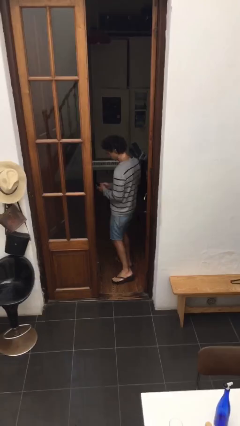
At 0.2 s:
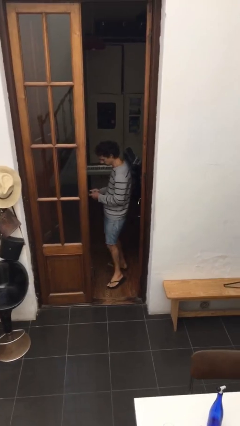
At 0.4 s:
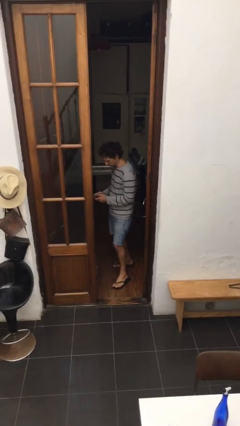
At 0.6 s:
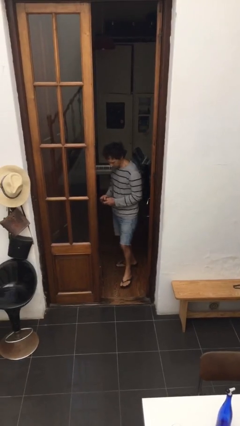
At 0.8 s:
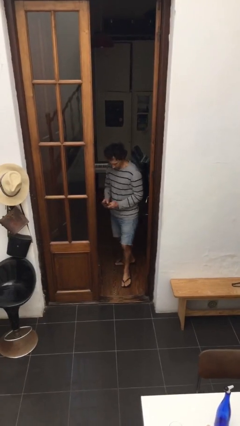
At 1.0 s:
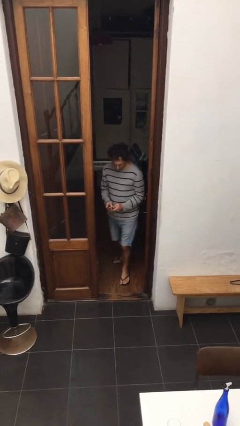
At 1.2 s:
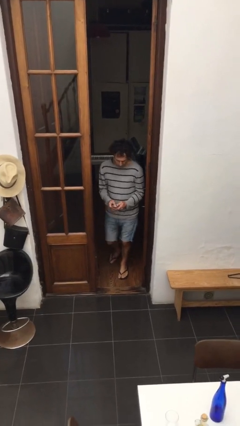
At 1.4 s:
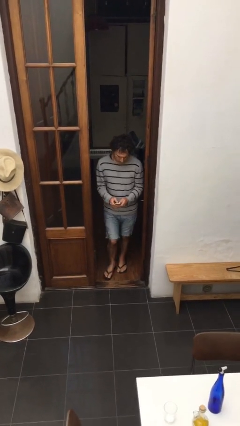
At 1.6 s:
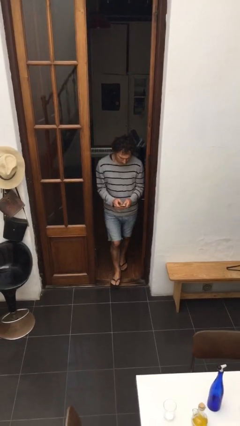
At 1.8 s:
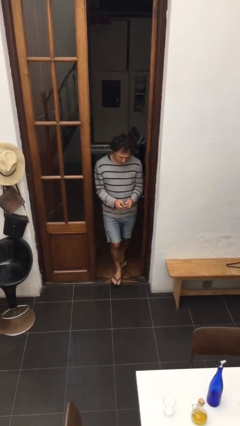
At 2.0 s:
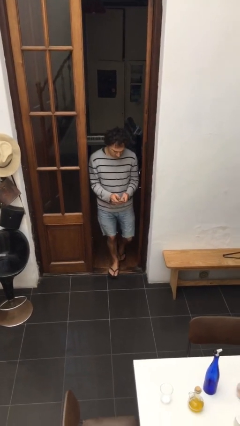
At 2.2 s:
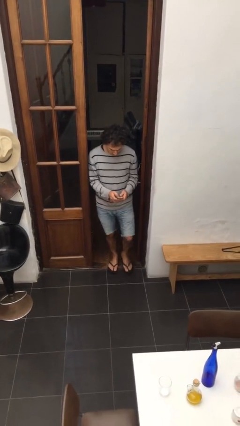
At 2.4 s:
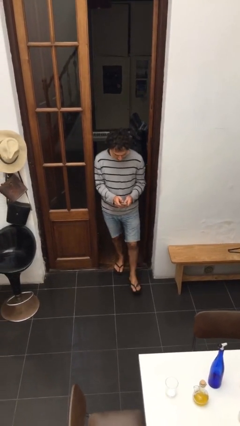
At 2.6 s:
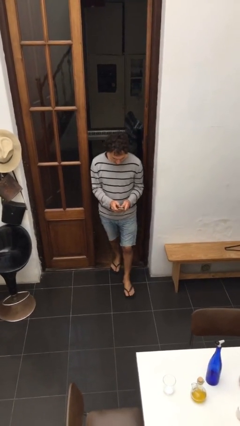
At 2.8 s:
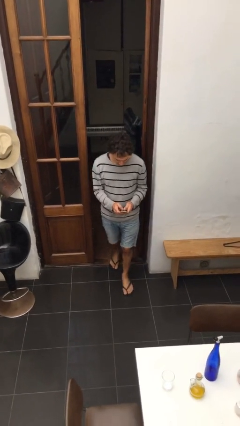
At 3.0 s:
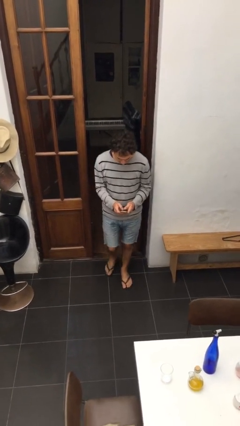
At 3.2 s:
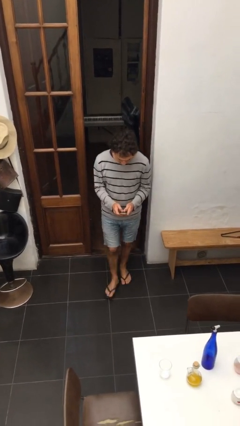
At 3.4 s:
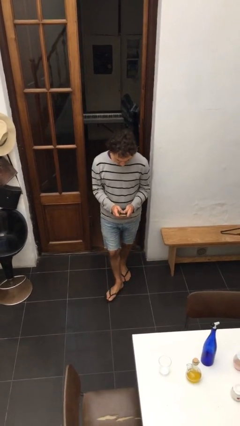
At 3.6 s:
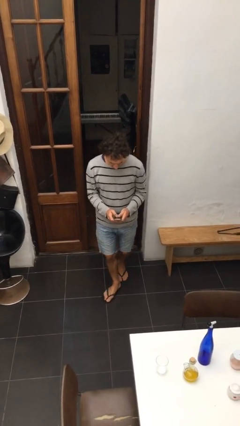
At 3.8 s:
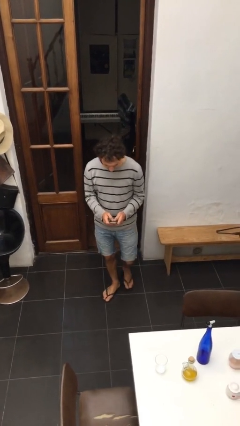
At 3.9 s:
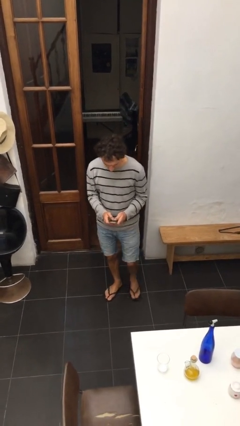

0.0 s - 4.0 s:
person enters scene through structure

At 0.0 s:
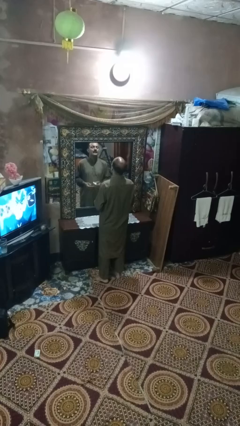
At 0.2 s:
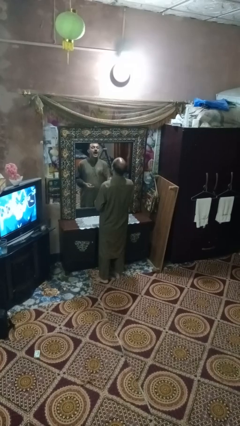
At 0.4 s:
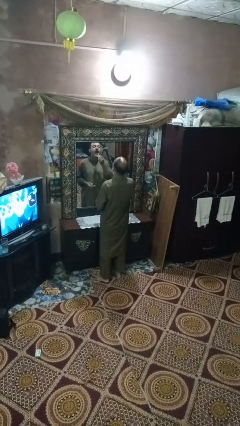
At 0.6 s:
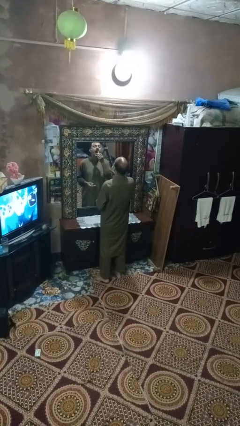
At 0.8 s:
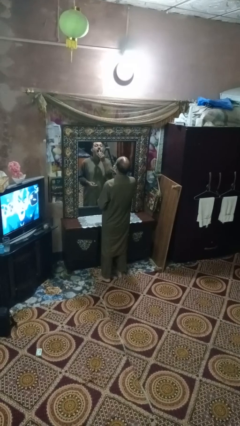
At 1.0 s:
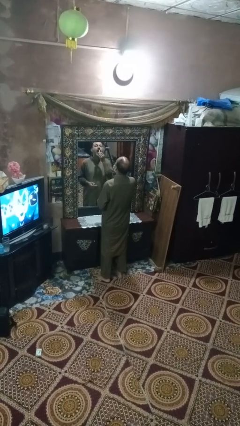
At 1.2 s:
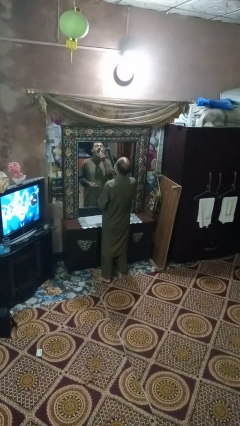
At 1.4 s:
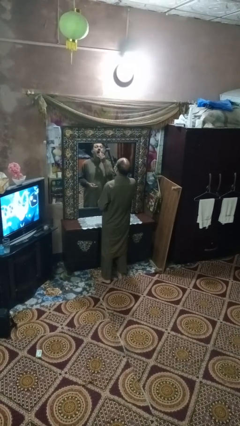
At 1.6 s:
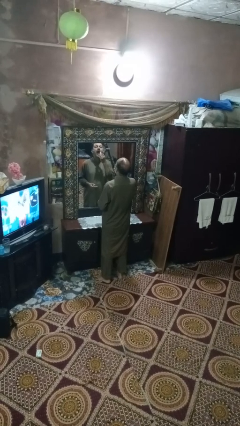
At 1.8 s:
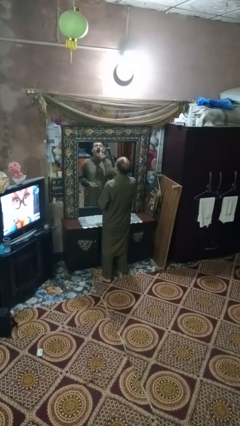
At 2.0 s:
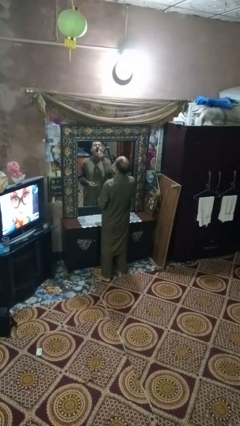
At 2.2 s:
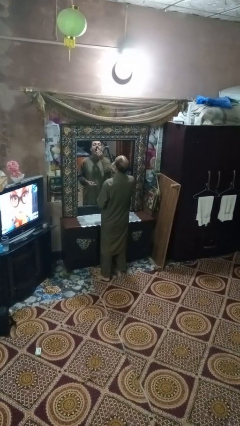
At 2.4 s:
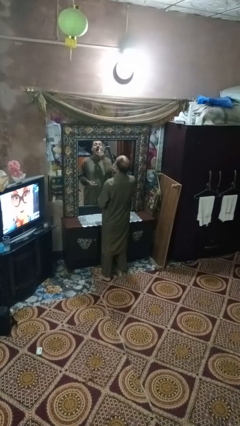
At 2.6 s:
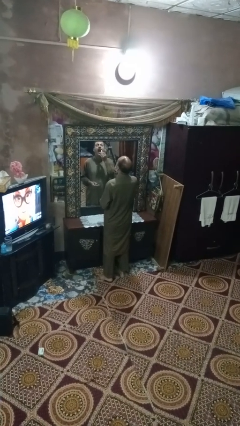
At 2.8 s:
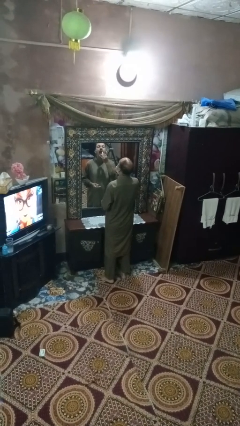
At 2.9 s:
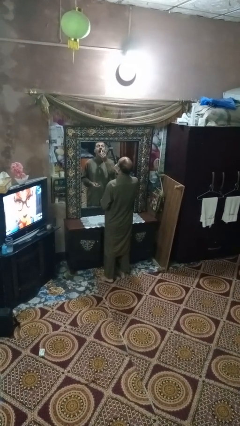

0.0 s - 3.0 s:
person applies lip makeup

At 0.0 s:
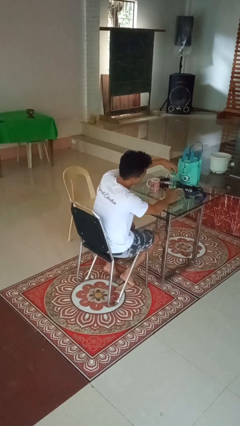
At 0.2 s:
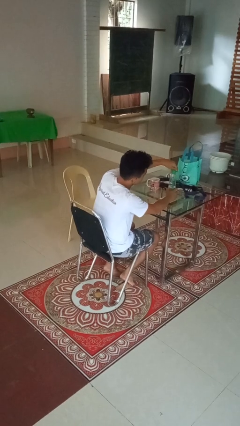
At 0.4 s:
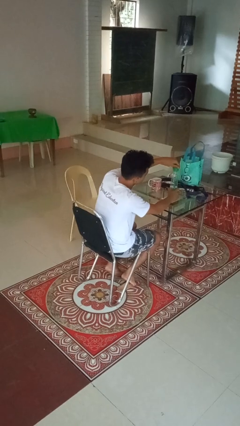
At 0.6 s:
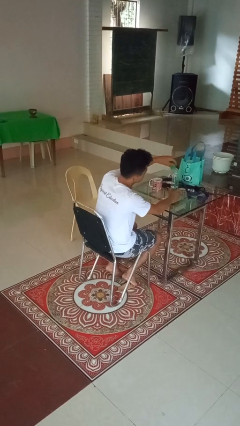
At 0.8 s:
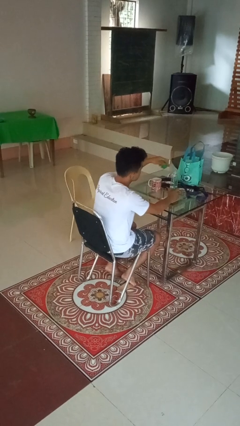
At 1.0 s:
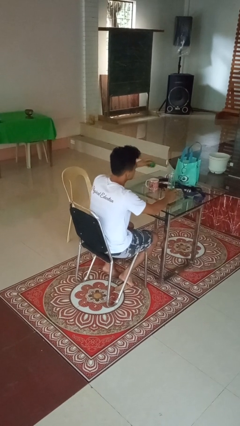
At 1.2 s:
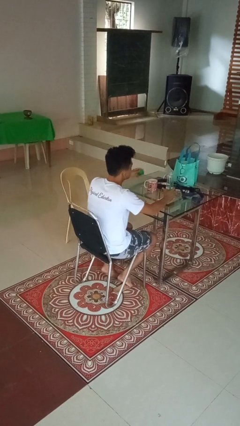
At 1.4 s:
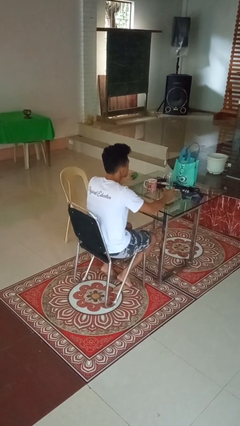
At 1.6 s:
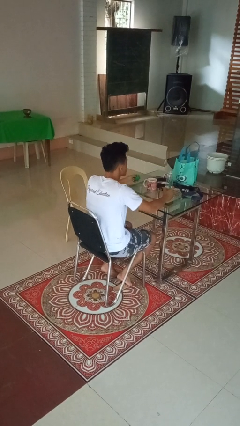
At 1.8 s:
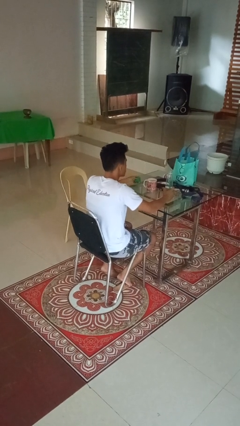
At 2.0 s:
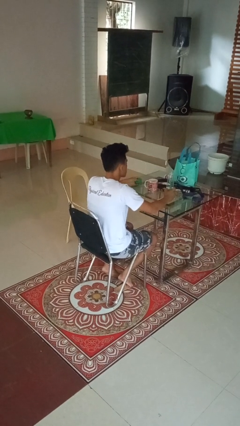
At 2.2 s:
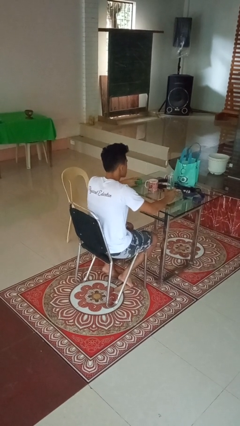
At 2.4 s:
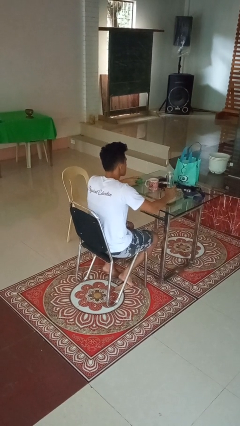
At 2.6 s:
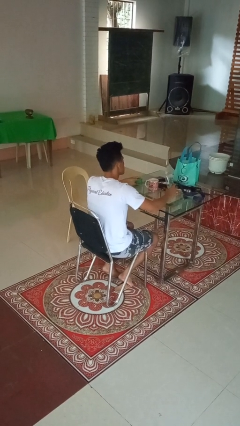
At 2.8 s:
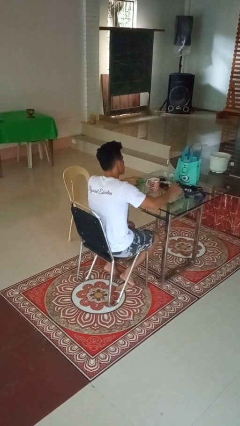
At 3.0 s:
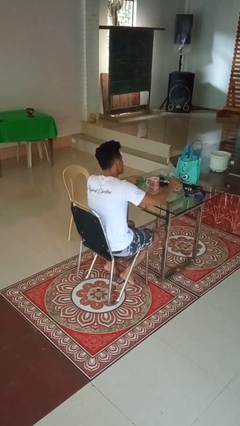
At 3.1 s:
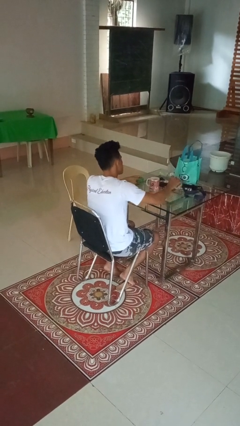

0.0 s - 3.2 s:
person unscrews lid from bottle

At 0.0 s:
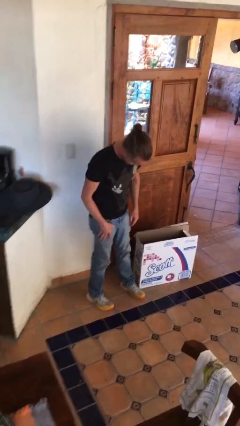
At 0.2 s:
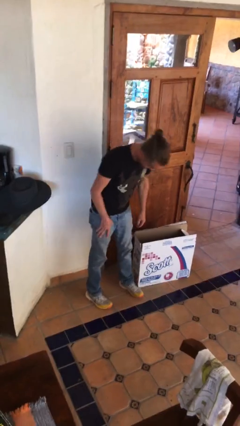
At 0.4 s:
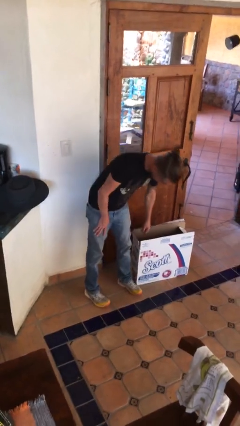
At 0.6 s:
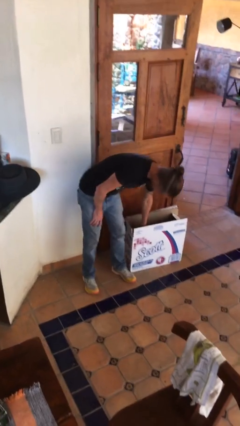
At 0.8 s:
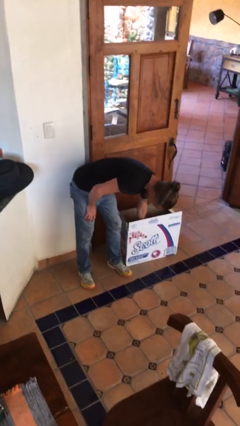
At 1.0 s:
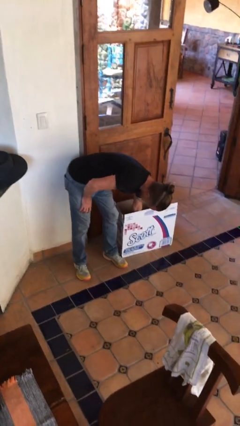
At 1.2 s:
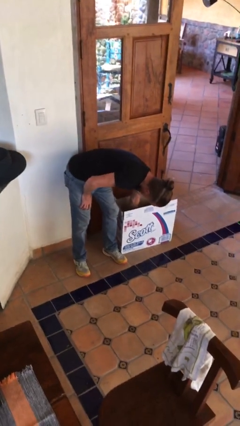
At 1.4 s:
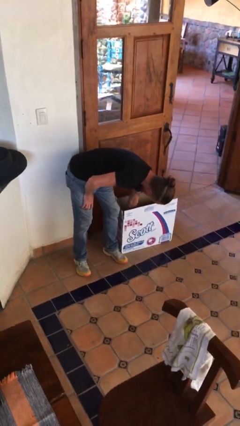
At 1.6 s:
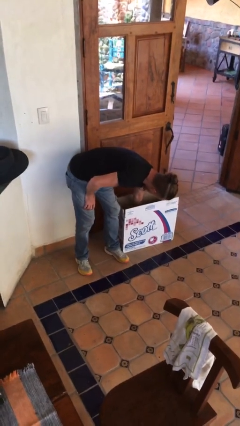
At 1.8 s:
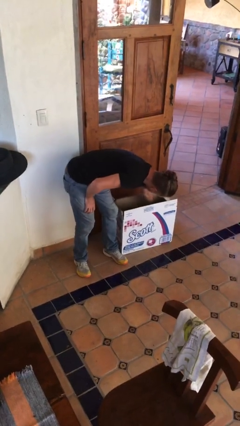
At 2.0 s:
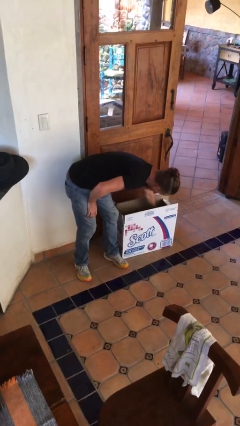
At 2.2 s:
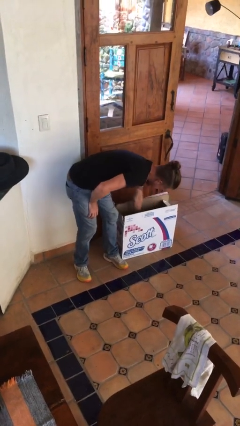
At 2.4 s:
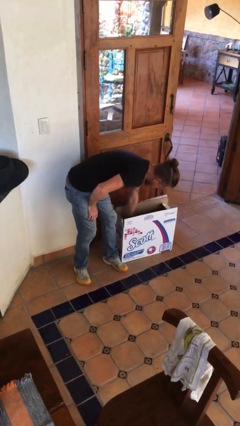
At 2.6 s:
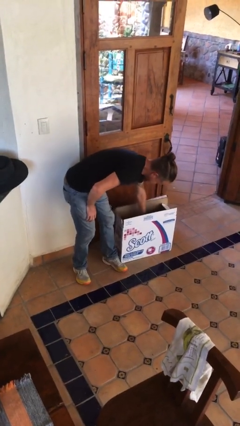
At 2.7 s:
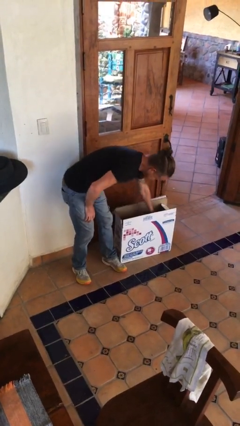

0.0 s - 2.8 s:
person searches in box

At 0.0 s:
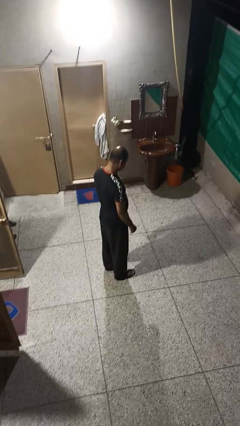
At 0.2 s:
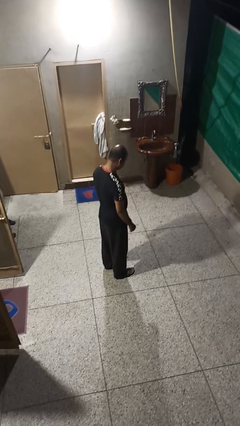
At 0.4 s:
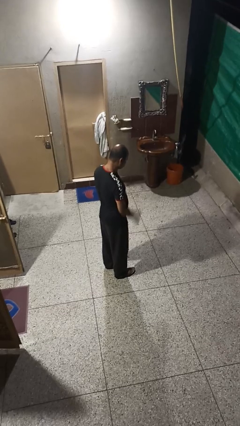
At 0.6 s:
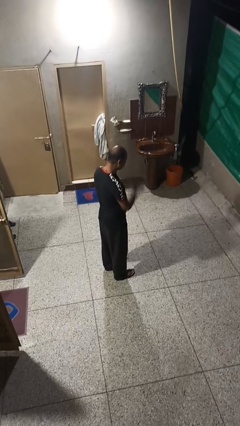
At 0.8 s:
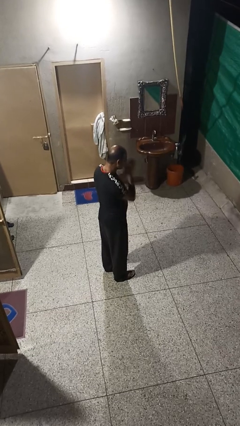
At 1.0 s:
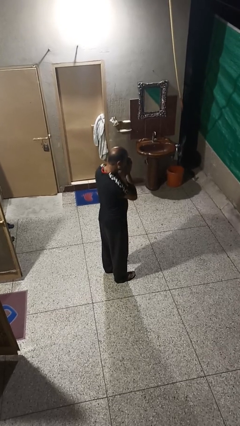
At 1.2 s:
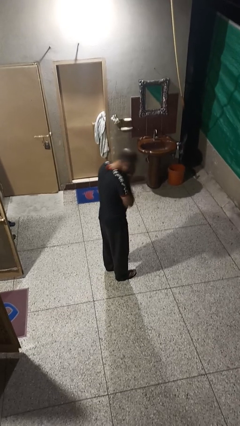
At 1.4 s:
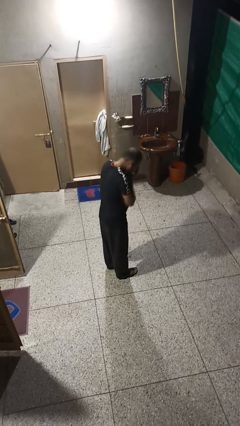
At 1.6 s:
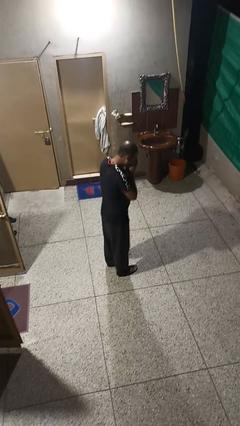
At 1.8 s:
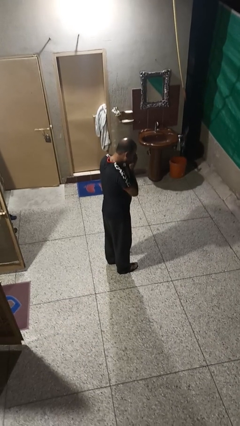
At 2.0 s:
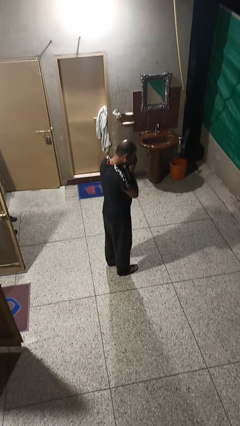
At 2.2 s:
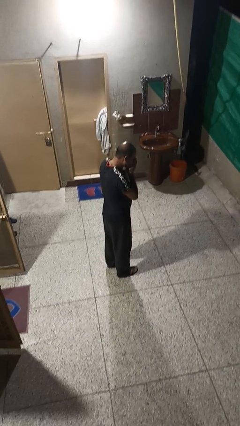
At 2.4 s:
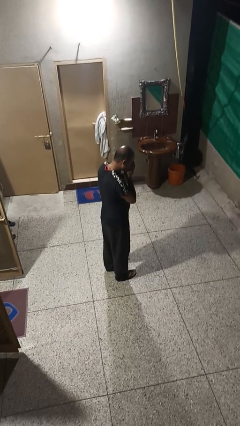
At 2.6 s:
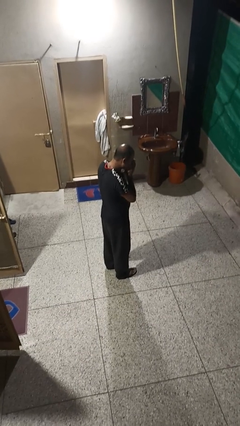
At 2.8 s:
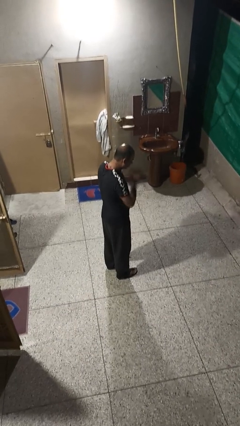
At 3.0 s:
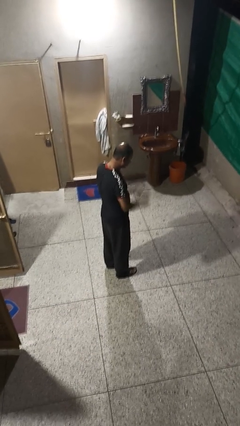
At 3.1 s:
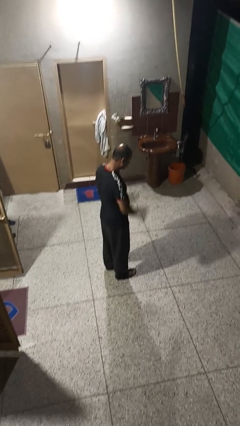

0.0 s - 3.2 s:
person sneezes into hand

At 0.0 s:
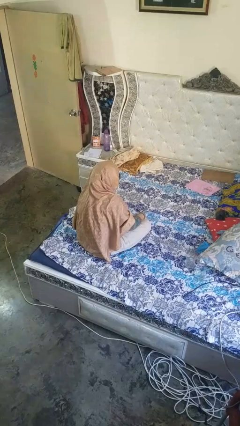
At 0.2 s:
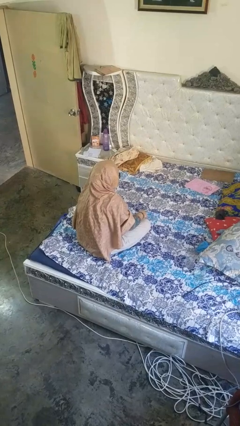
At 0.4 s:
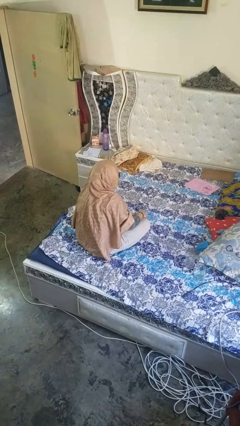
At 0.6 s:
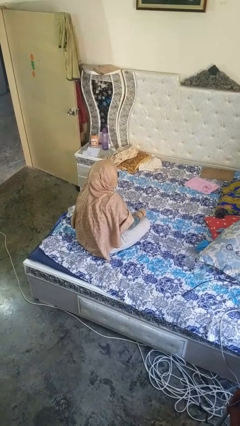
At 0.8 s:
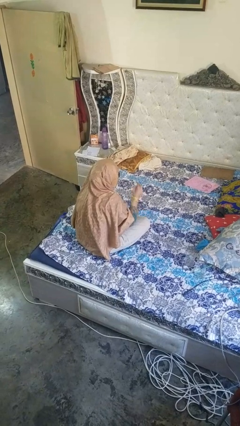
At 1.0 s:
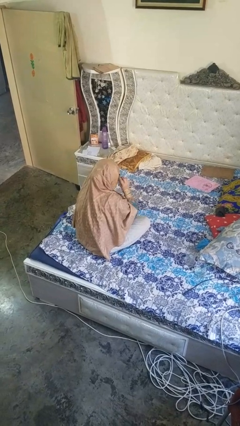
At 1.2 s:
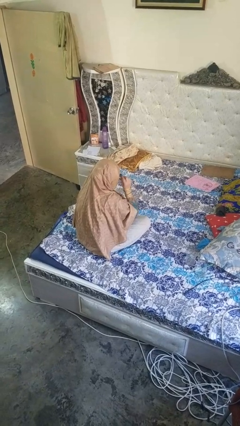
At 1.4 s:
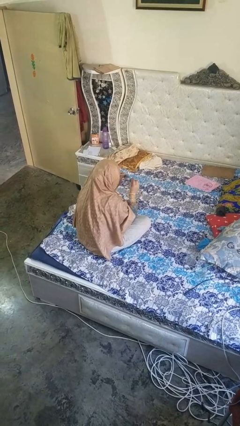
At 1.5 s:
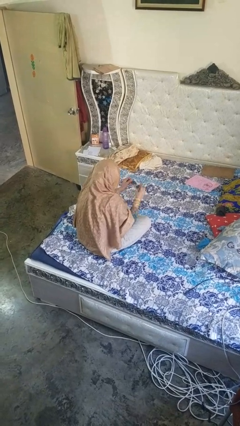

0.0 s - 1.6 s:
person takes off glasses
